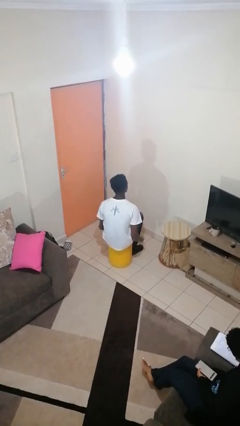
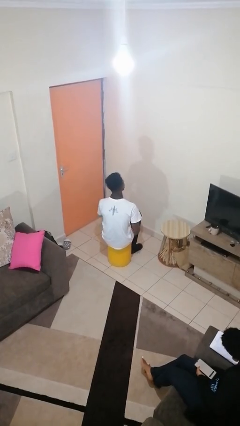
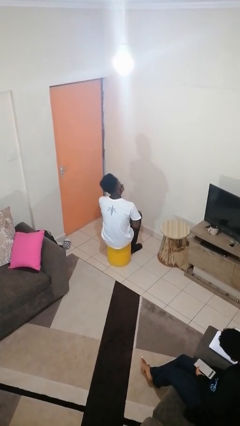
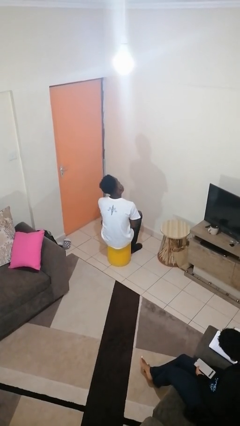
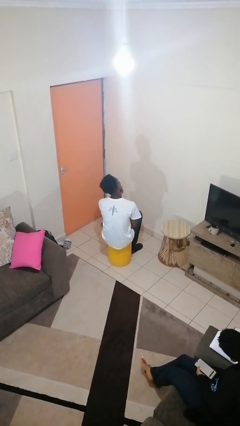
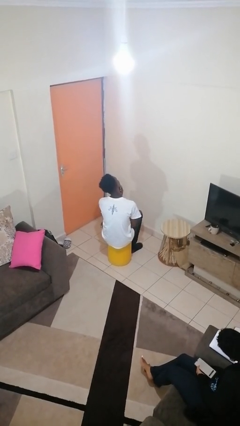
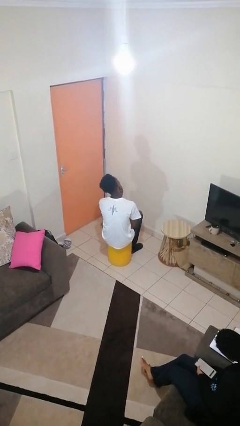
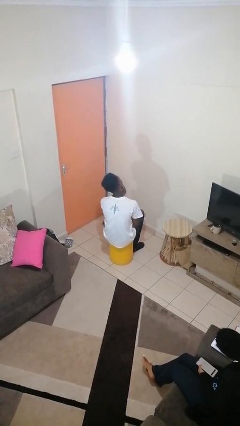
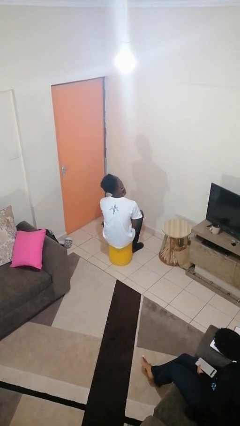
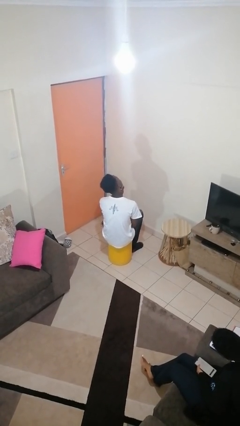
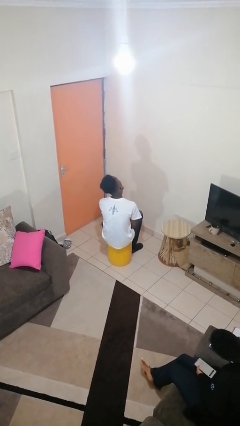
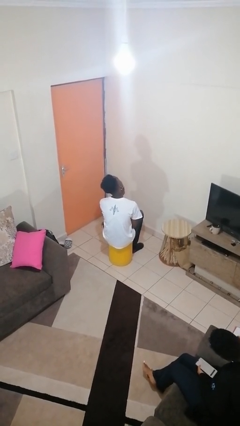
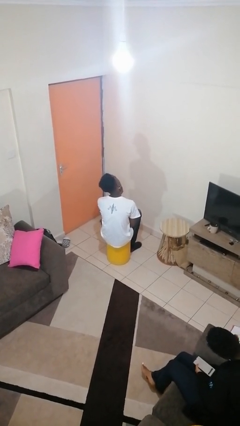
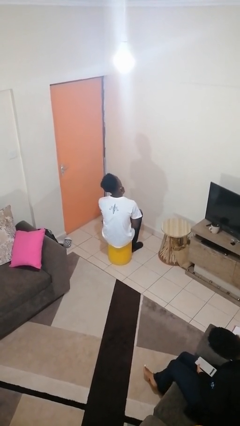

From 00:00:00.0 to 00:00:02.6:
person strokes chin

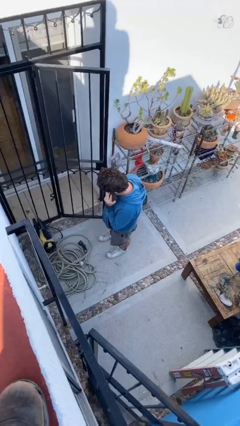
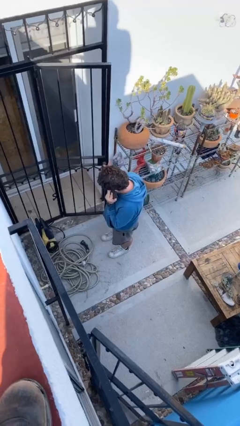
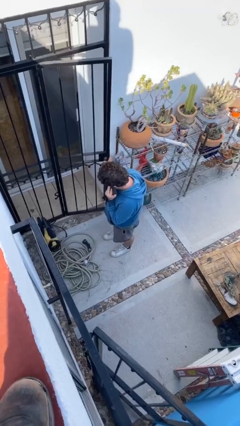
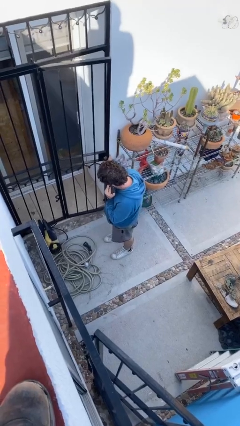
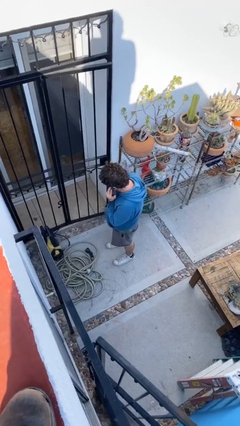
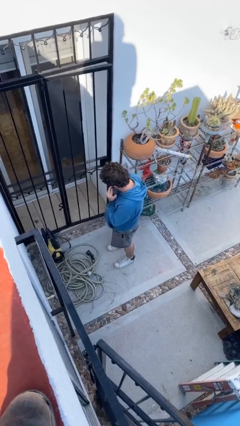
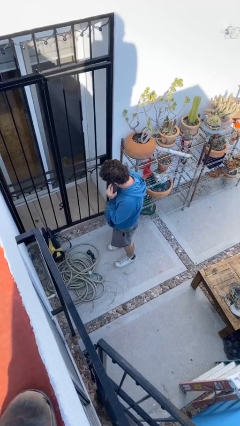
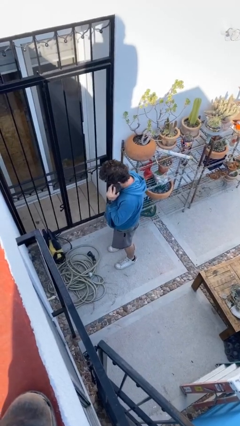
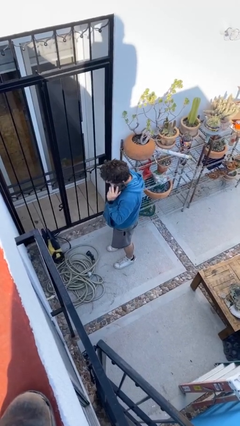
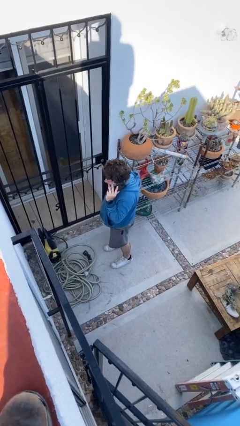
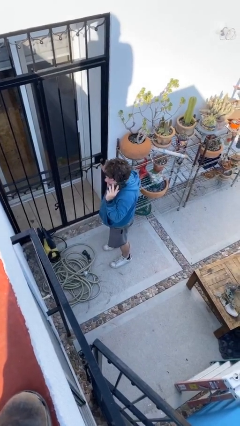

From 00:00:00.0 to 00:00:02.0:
person closes facility door

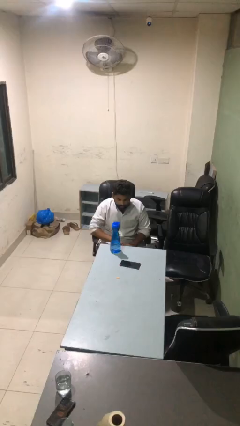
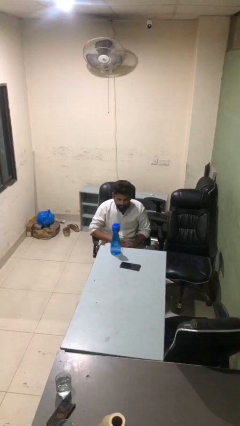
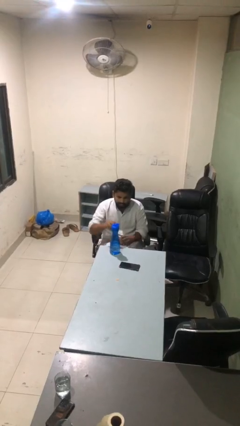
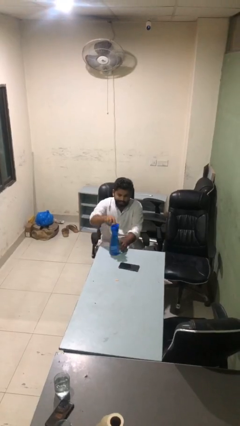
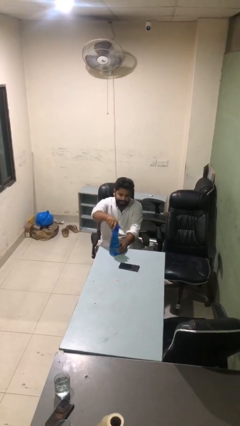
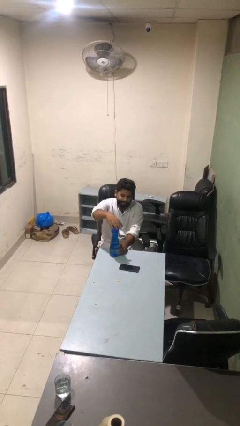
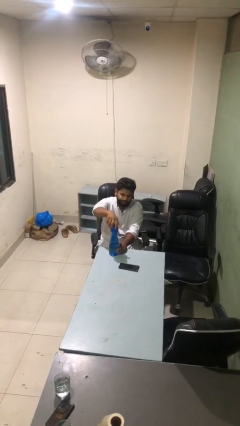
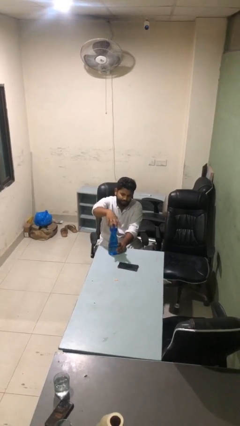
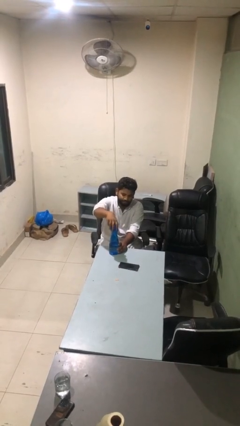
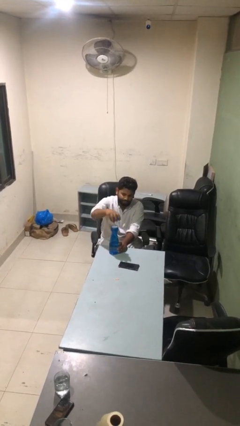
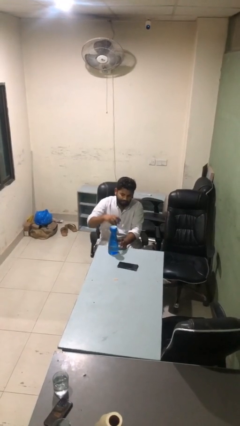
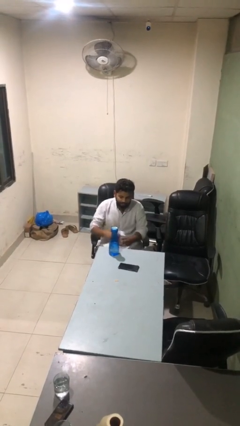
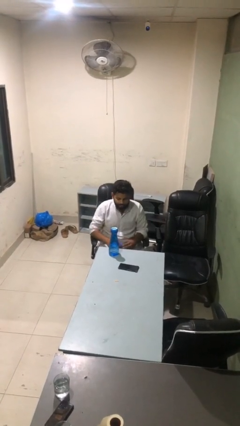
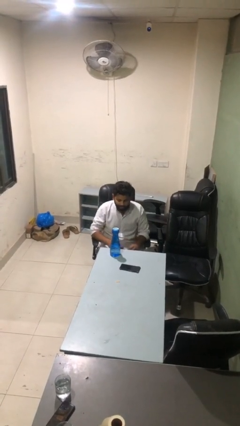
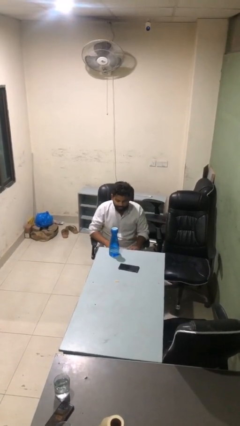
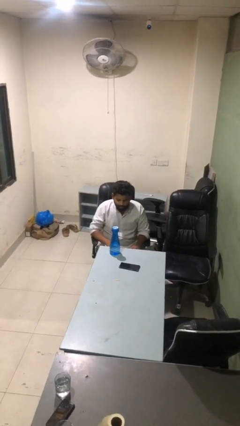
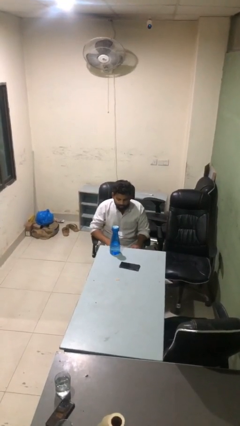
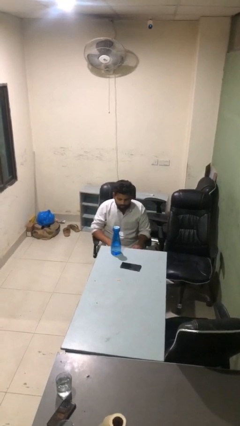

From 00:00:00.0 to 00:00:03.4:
person unscrews lid from bottle

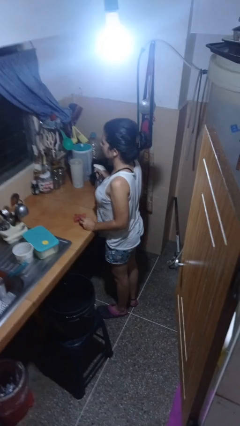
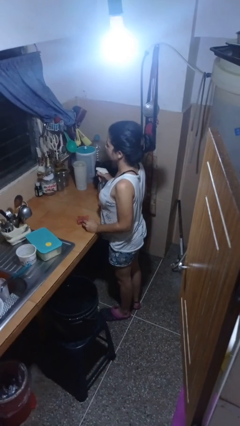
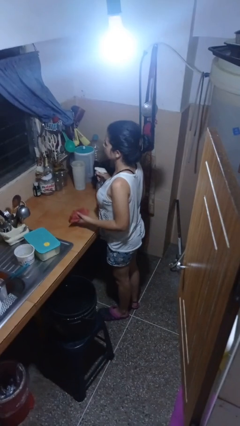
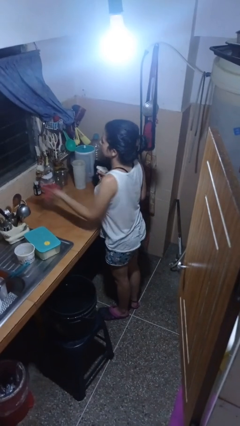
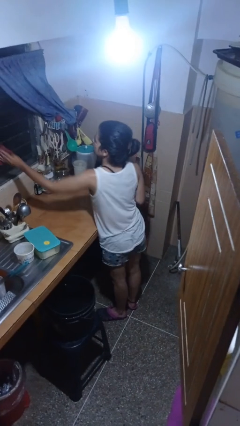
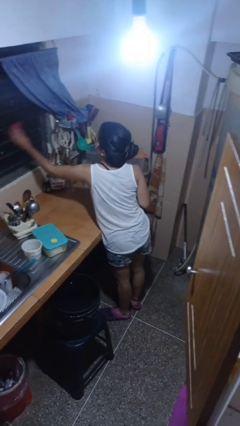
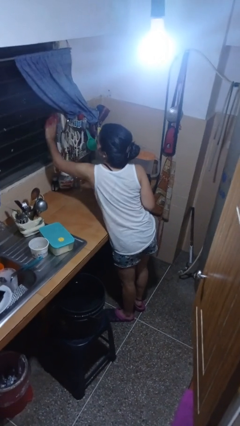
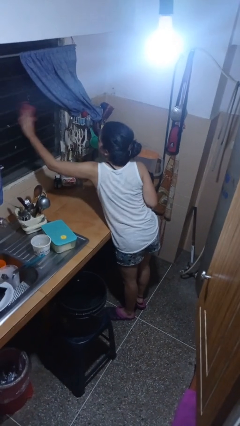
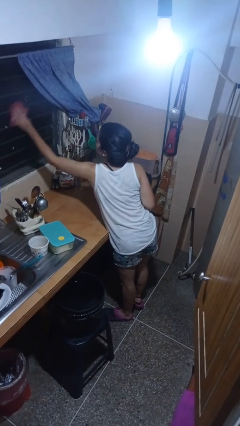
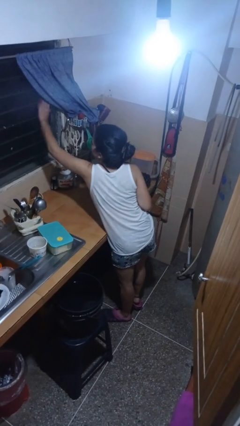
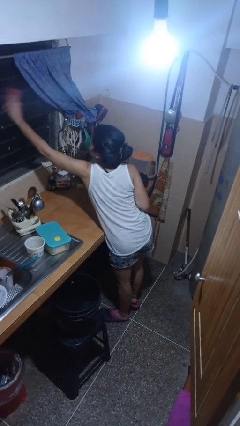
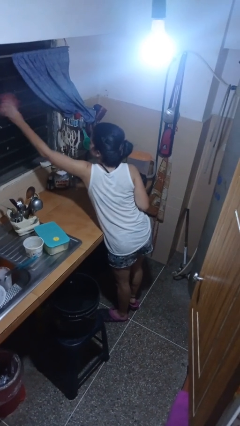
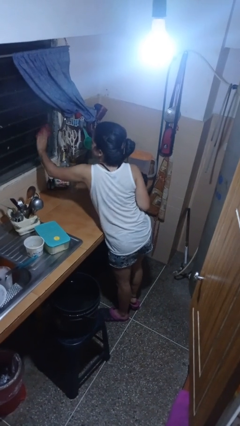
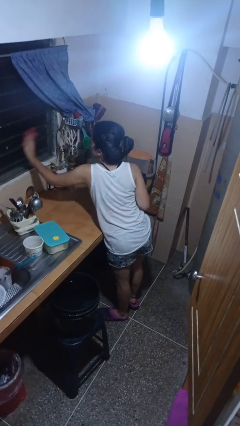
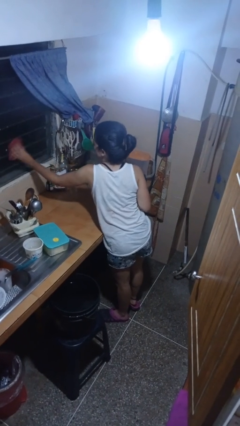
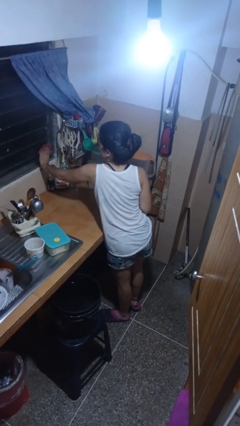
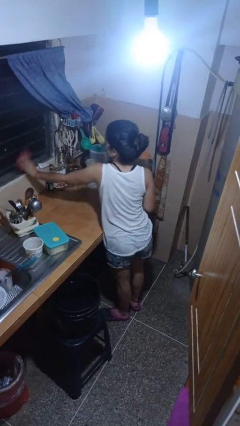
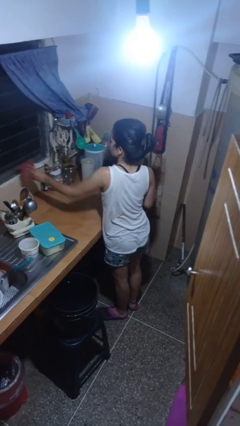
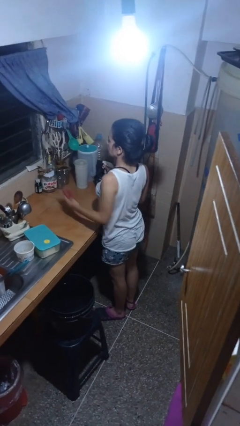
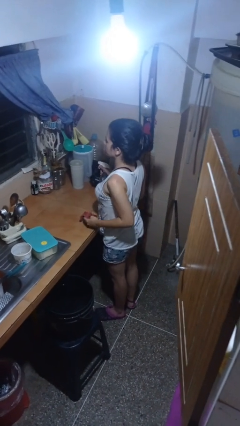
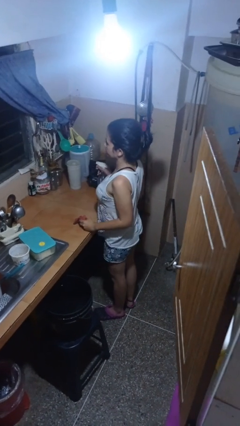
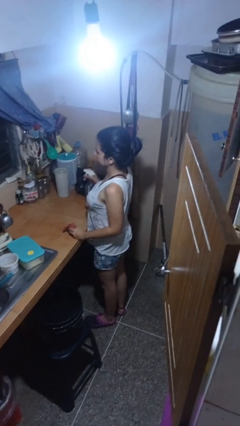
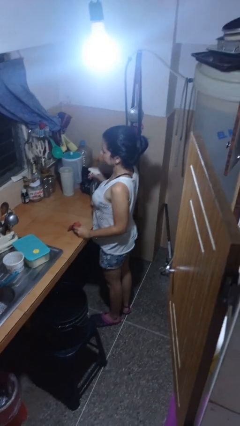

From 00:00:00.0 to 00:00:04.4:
person washes window

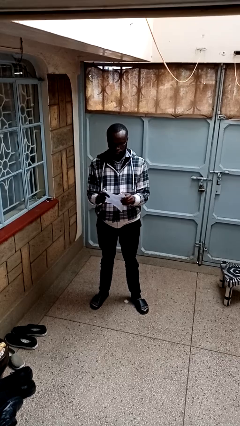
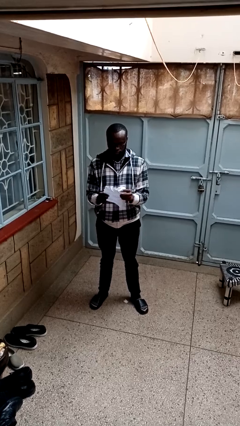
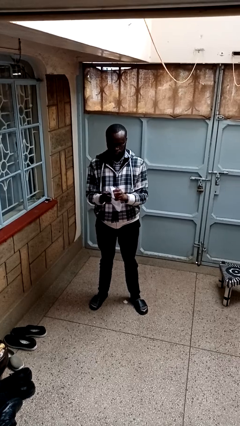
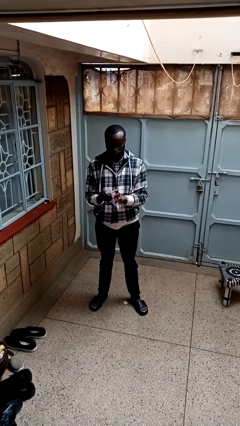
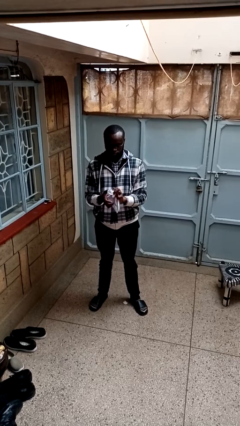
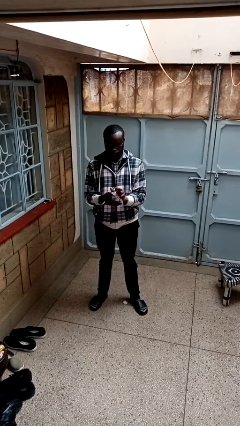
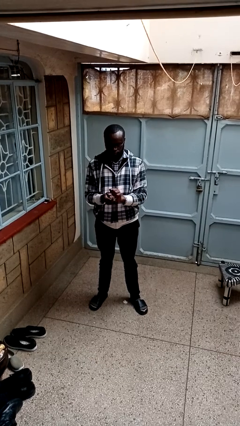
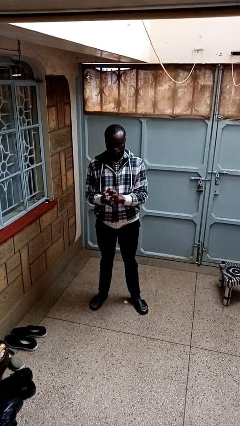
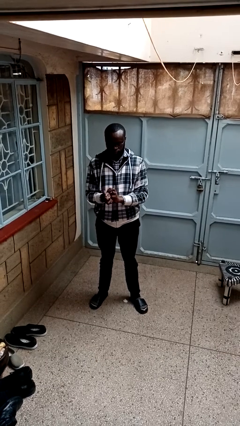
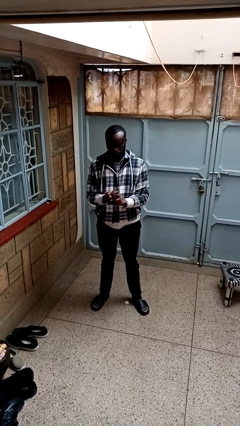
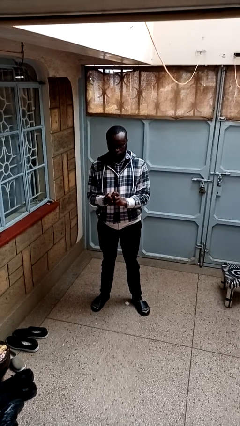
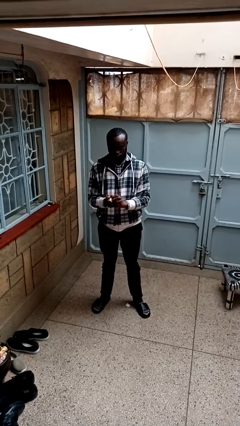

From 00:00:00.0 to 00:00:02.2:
person crumples paper

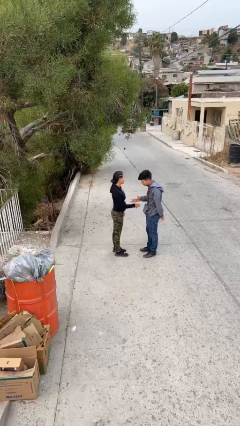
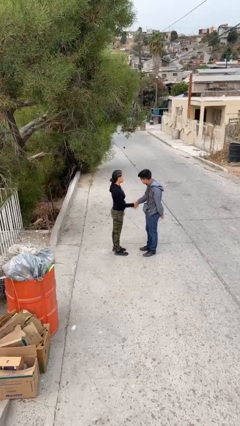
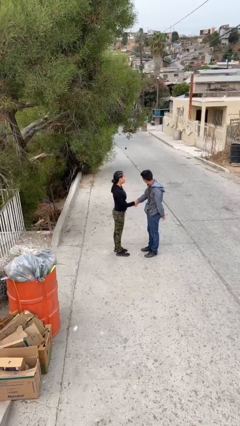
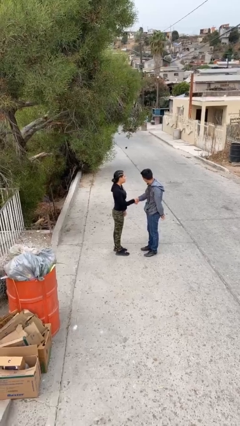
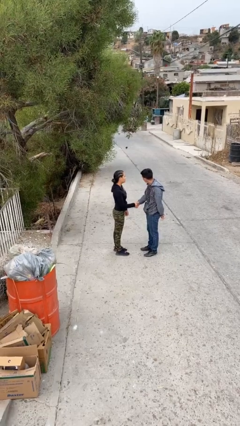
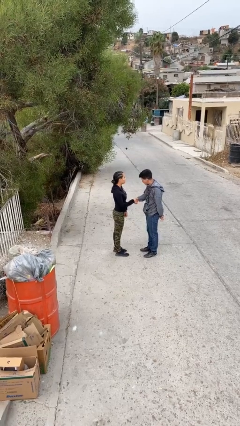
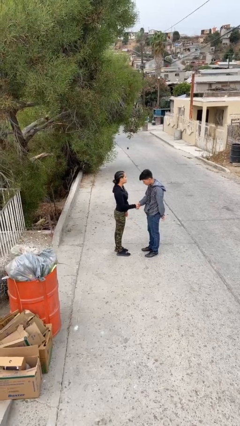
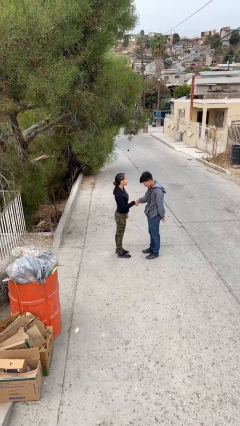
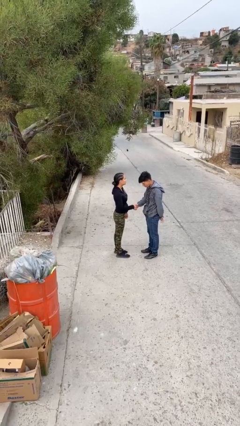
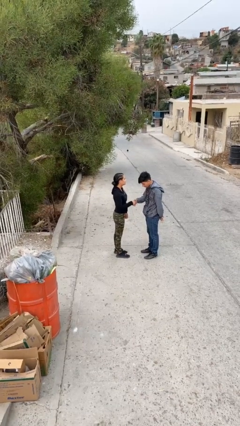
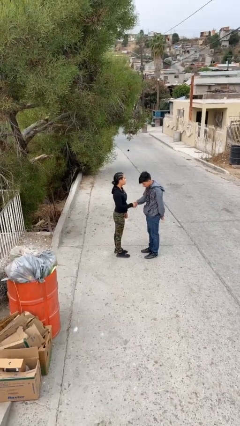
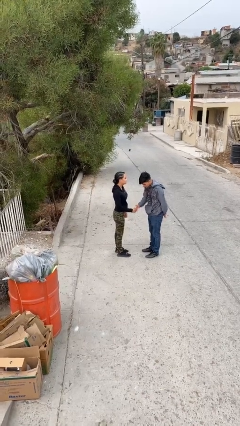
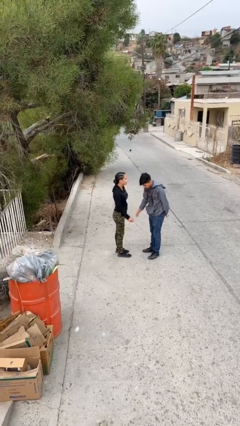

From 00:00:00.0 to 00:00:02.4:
person shakes hand

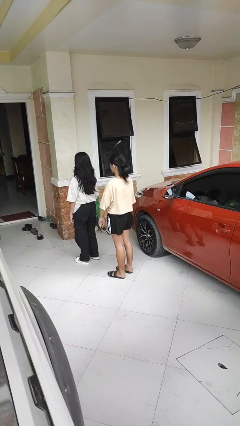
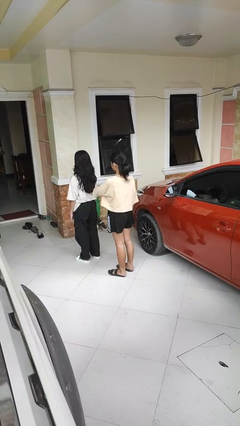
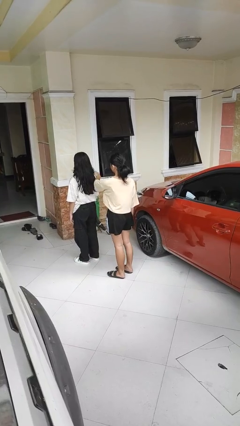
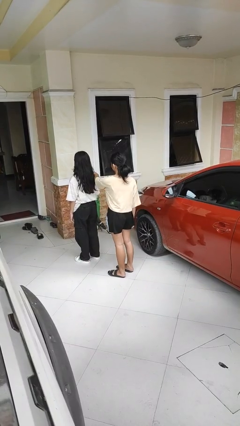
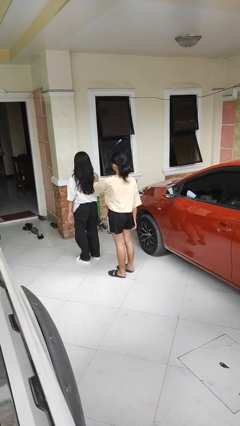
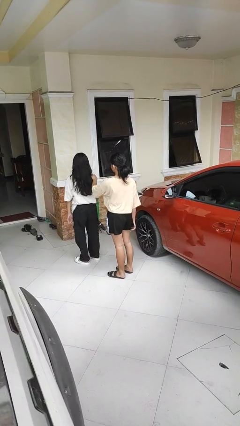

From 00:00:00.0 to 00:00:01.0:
person grabs person by shoulder
